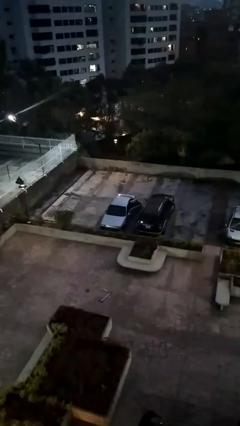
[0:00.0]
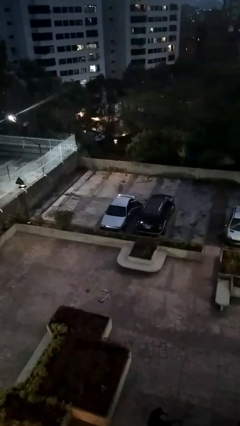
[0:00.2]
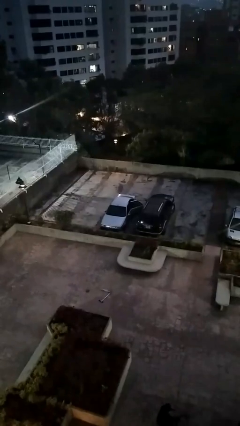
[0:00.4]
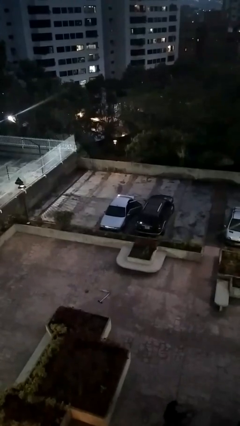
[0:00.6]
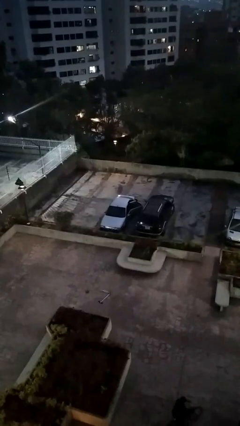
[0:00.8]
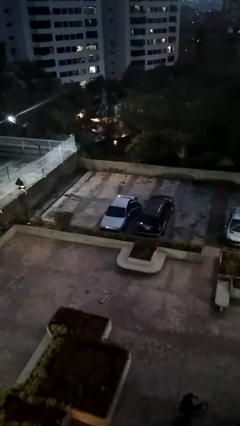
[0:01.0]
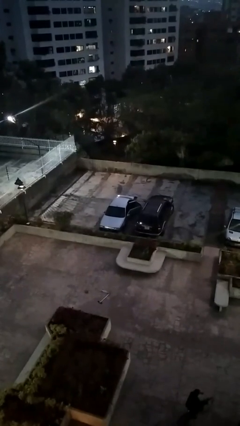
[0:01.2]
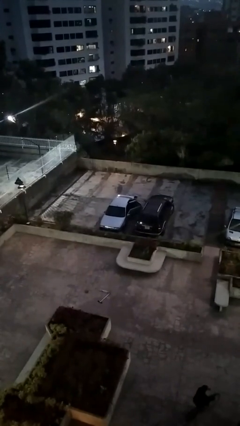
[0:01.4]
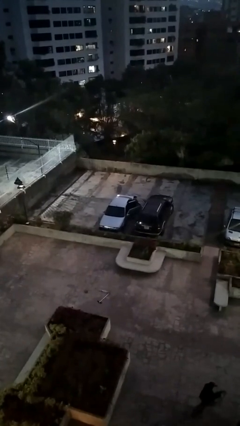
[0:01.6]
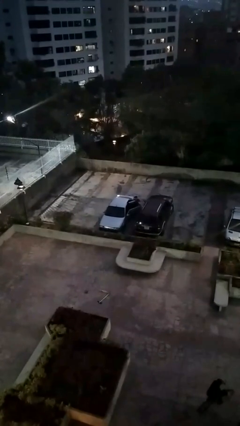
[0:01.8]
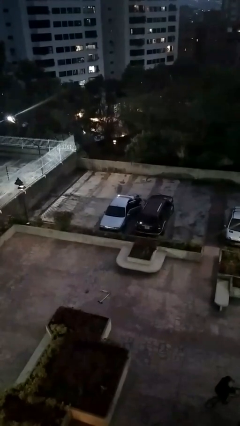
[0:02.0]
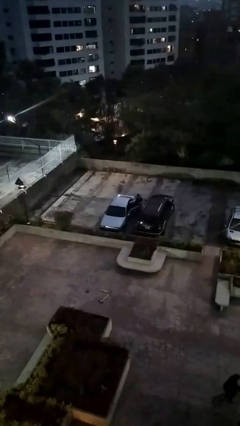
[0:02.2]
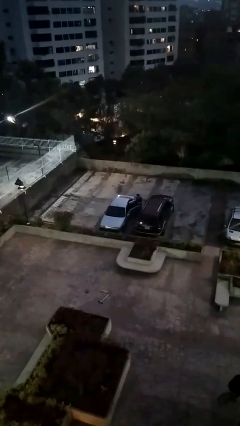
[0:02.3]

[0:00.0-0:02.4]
car drops off person

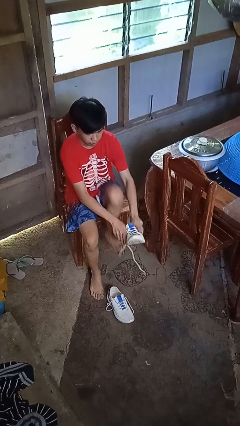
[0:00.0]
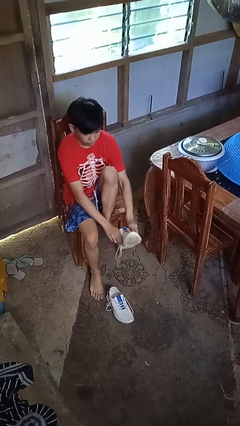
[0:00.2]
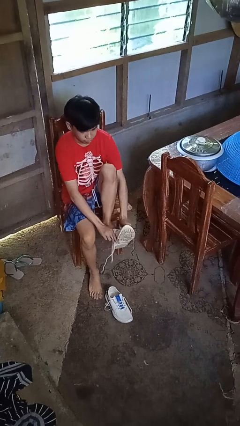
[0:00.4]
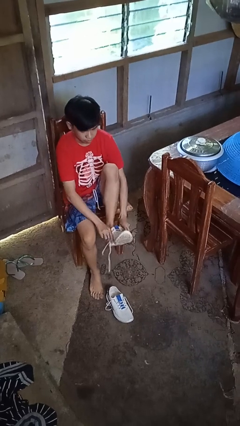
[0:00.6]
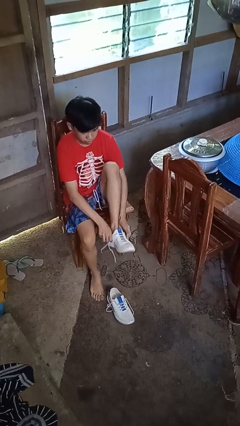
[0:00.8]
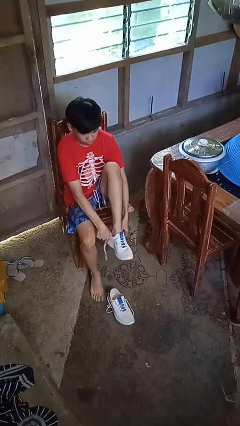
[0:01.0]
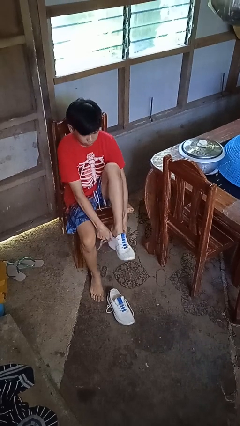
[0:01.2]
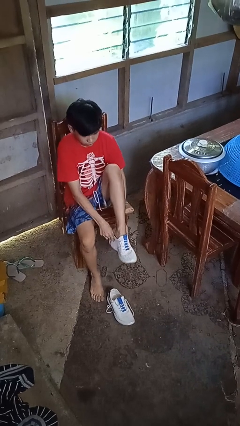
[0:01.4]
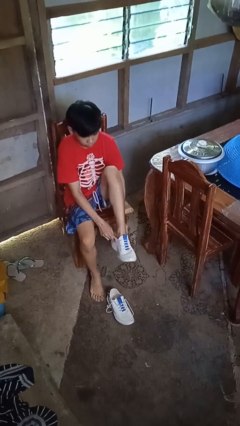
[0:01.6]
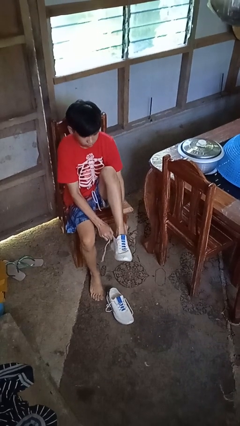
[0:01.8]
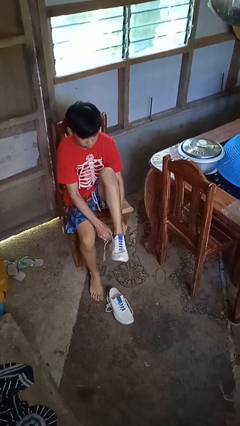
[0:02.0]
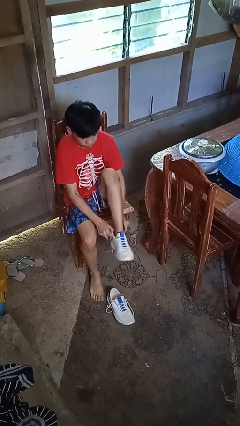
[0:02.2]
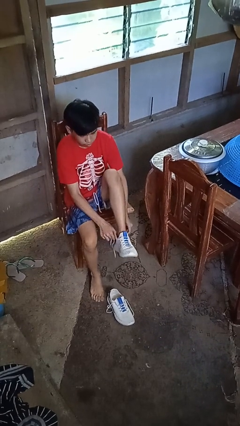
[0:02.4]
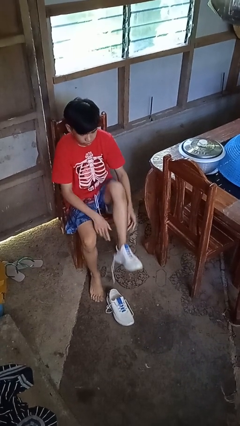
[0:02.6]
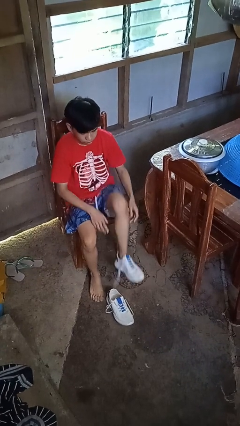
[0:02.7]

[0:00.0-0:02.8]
person puts on shoes

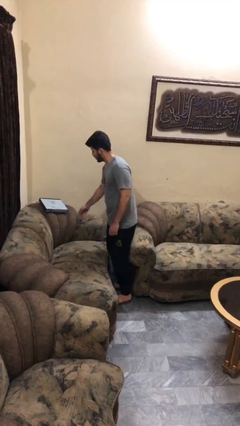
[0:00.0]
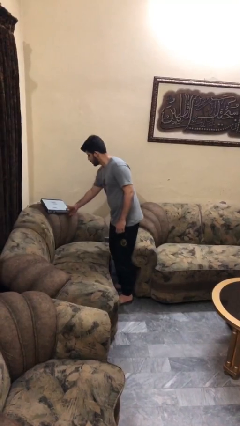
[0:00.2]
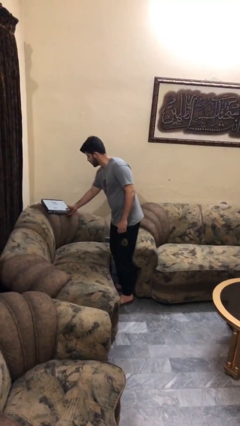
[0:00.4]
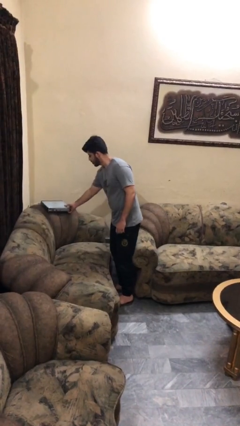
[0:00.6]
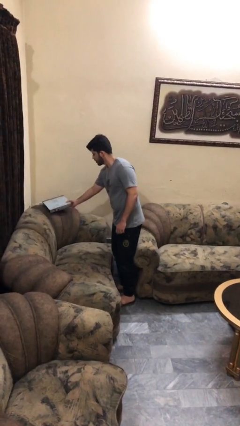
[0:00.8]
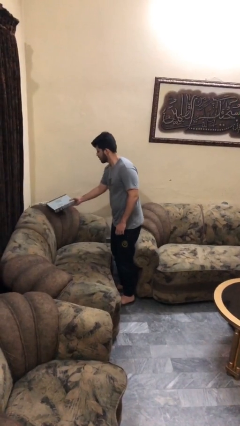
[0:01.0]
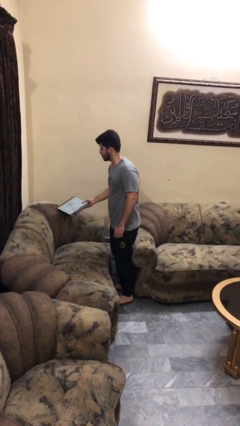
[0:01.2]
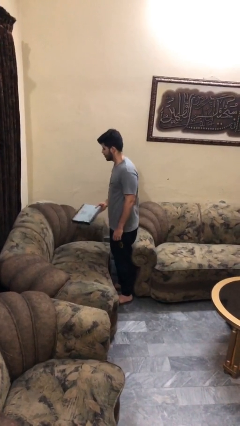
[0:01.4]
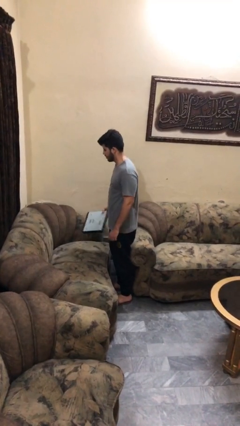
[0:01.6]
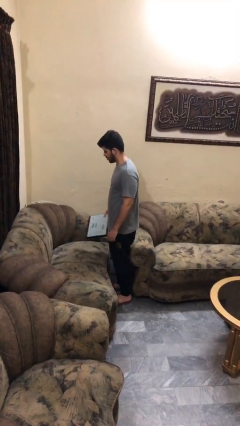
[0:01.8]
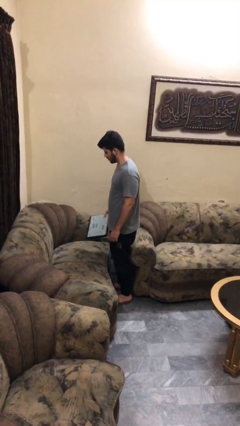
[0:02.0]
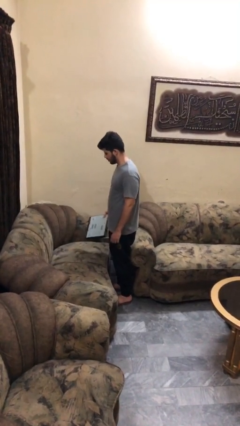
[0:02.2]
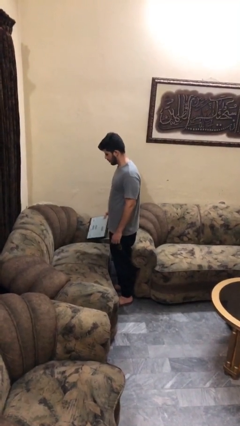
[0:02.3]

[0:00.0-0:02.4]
person picks up object from couch

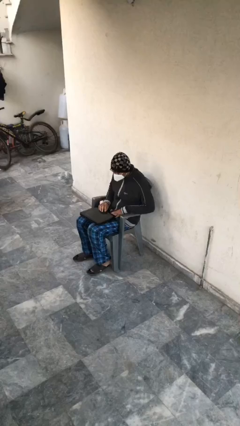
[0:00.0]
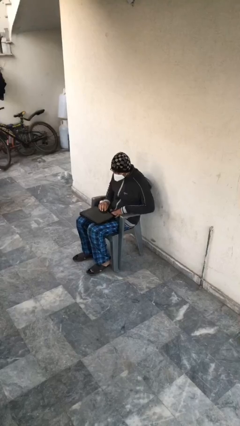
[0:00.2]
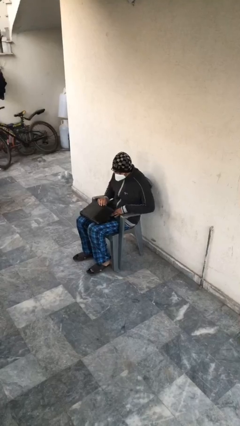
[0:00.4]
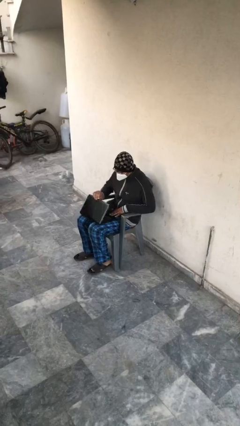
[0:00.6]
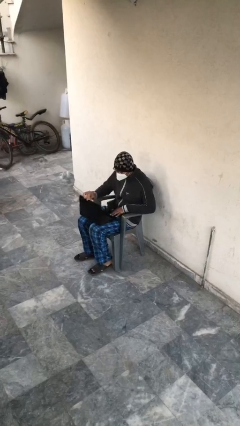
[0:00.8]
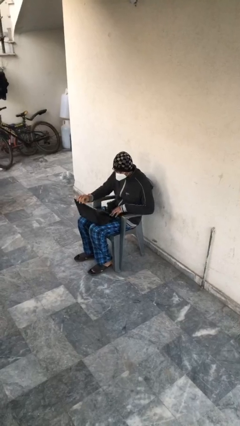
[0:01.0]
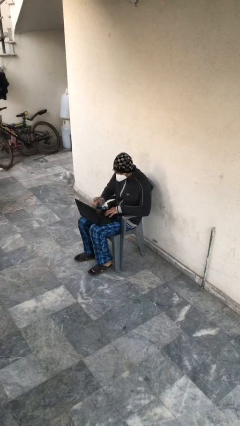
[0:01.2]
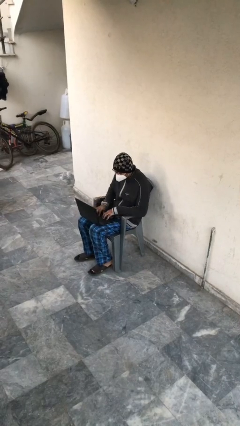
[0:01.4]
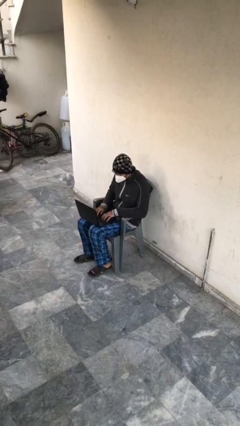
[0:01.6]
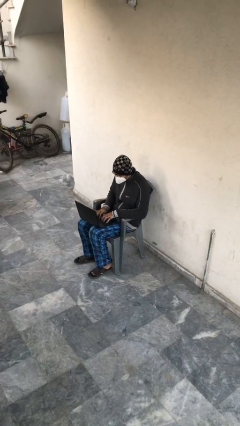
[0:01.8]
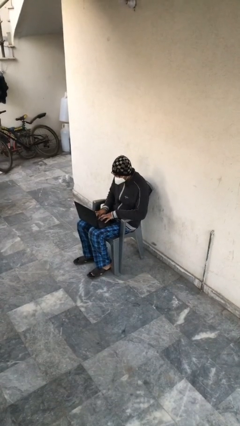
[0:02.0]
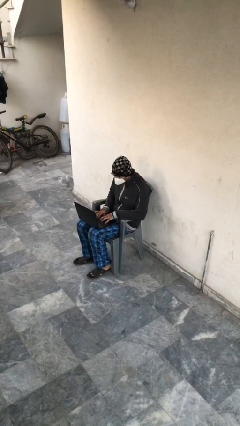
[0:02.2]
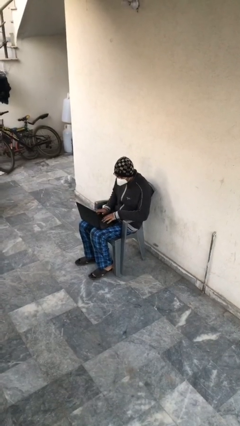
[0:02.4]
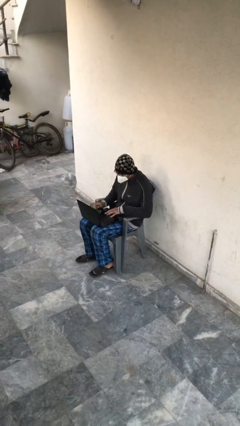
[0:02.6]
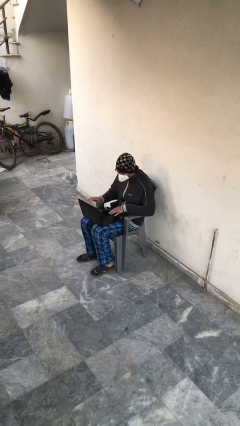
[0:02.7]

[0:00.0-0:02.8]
person interacts with laptop

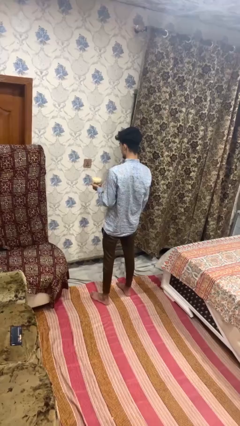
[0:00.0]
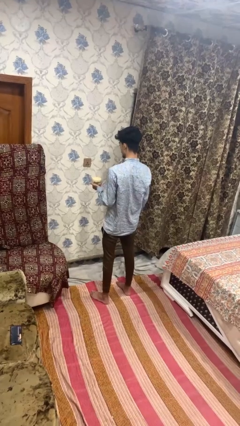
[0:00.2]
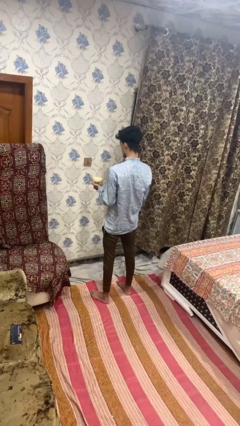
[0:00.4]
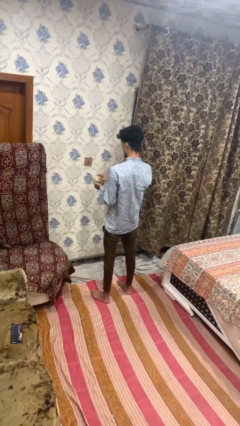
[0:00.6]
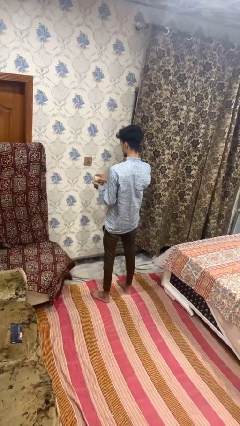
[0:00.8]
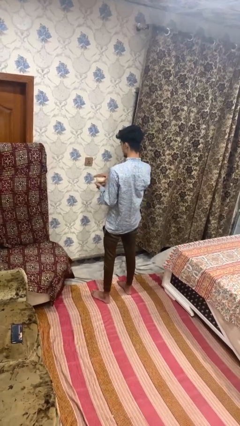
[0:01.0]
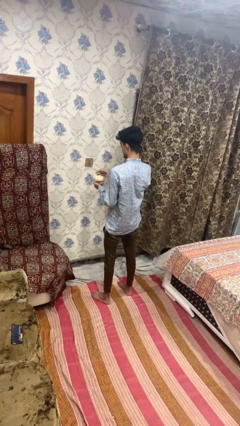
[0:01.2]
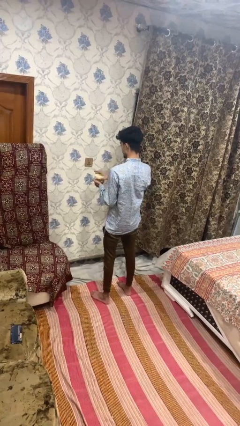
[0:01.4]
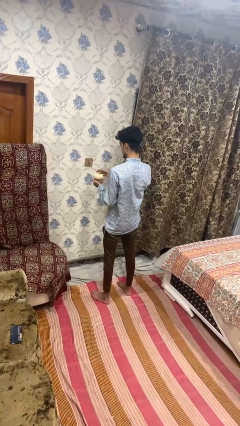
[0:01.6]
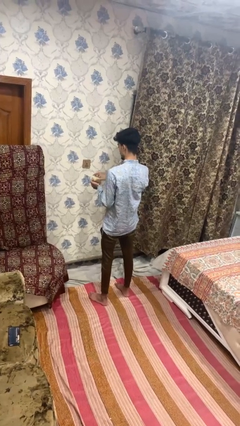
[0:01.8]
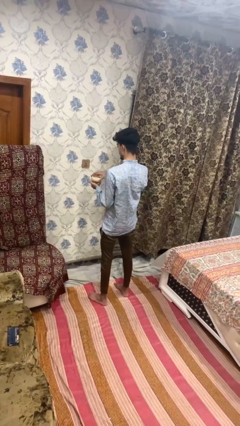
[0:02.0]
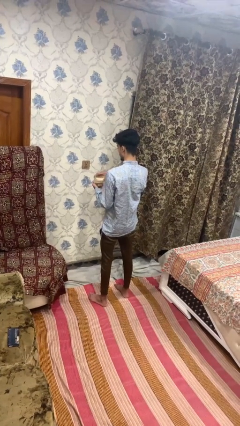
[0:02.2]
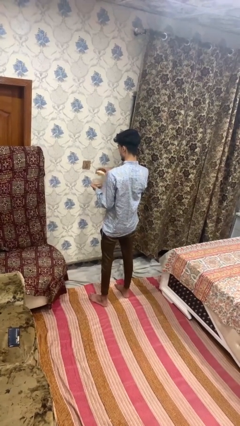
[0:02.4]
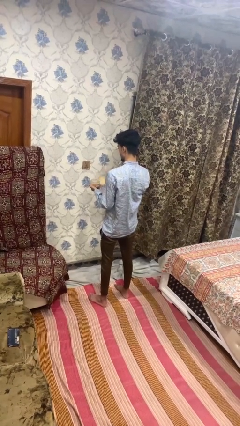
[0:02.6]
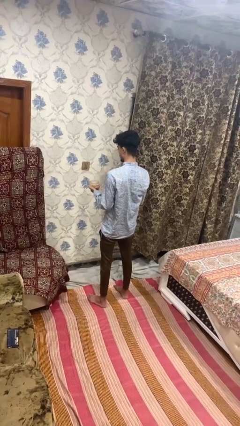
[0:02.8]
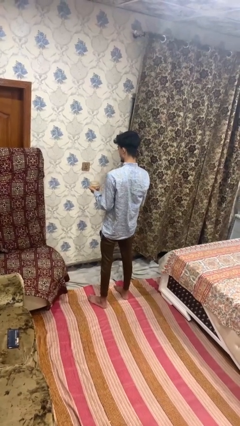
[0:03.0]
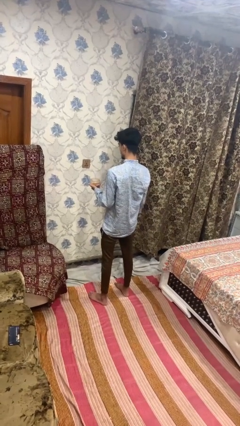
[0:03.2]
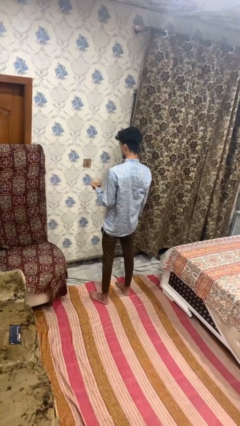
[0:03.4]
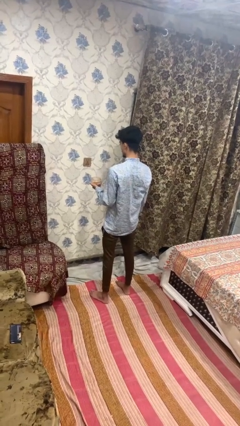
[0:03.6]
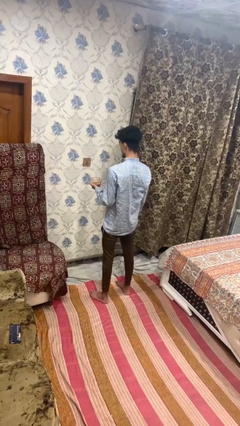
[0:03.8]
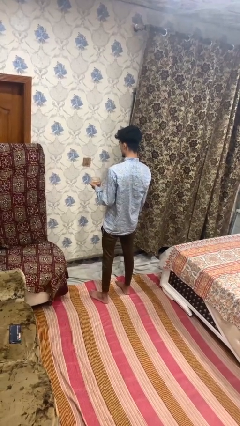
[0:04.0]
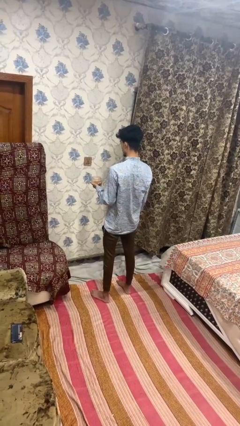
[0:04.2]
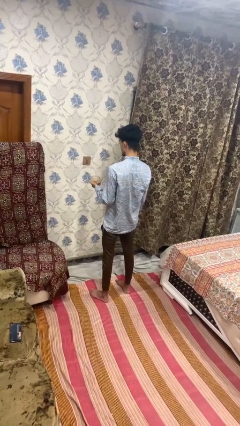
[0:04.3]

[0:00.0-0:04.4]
person opens jar

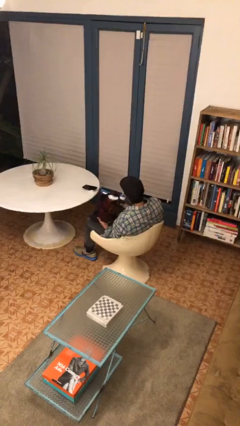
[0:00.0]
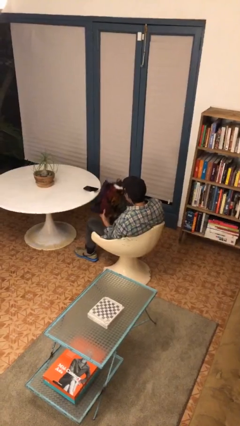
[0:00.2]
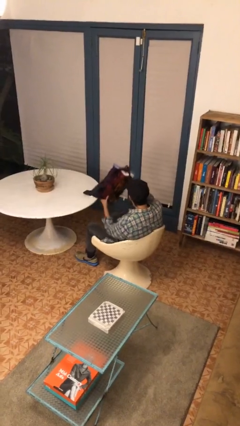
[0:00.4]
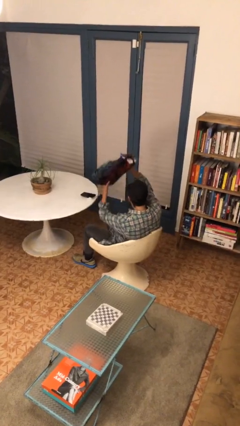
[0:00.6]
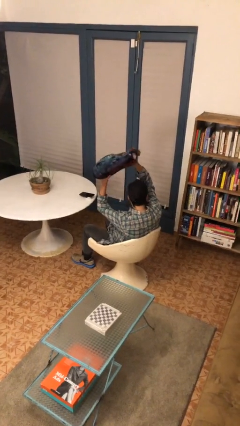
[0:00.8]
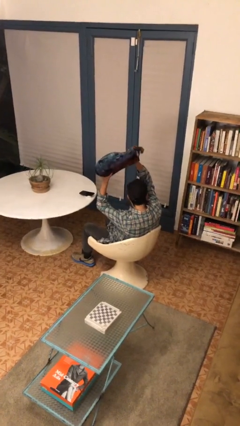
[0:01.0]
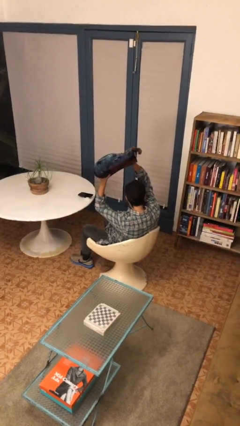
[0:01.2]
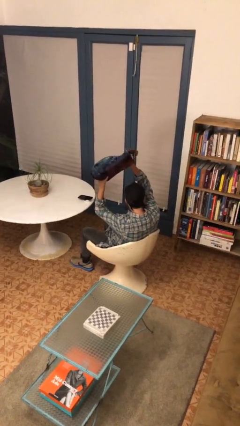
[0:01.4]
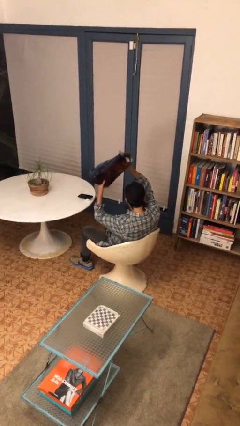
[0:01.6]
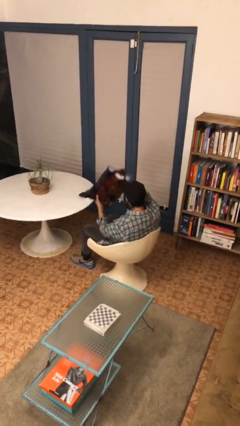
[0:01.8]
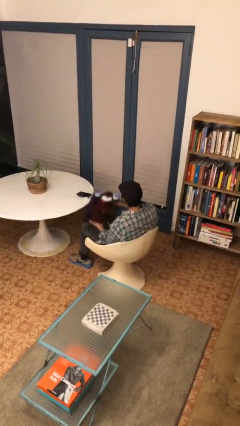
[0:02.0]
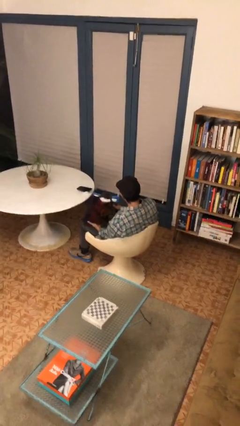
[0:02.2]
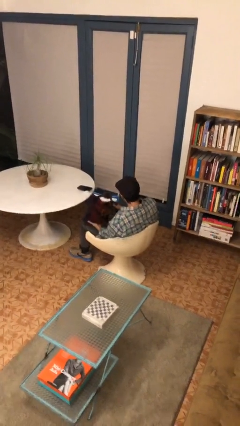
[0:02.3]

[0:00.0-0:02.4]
person holds object above head

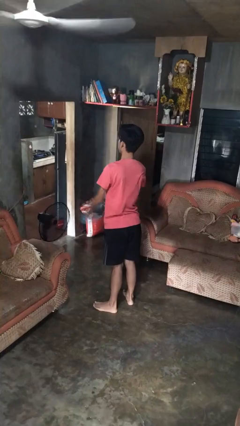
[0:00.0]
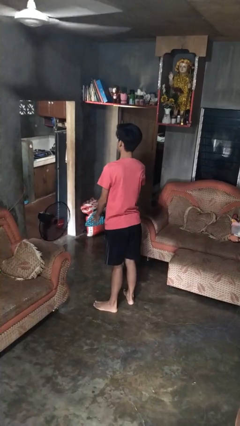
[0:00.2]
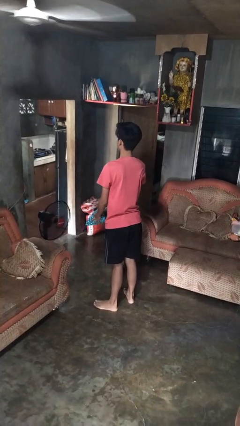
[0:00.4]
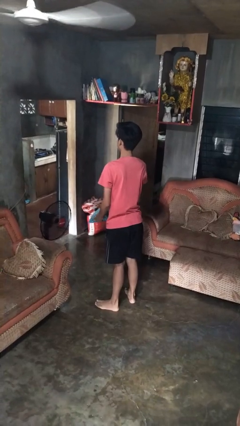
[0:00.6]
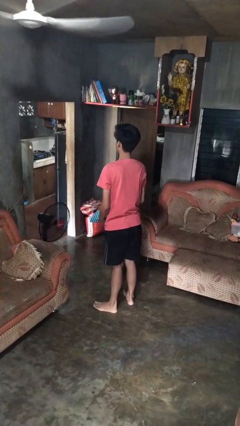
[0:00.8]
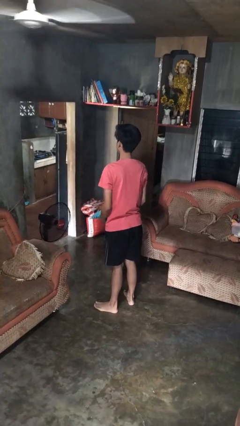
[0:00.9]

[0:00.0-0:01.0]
person catches dropped object
